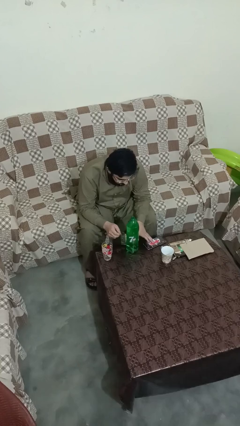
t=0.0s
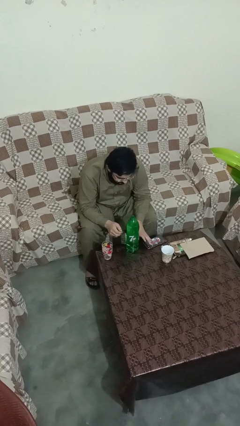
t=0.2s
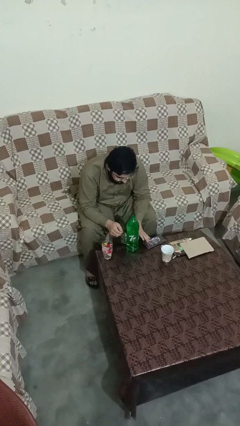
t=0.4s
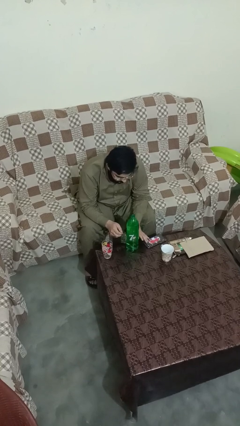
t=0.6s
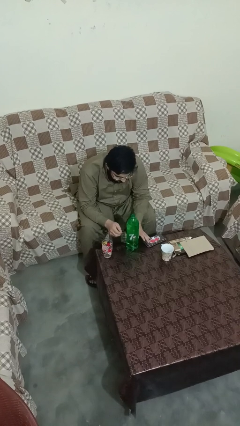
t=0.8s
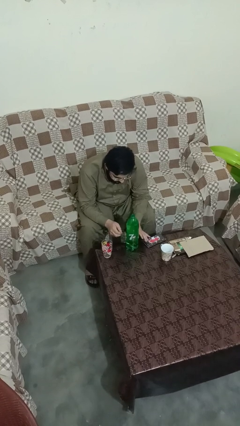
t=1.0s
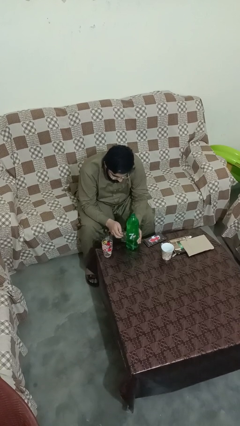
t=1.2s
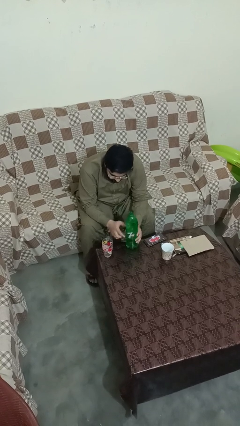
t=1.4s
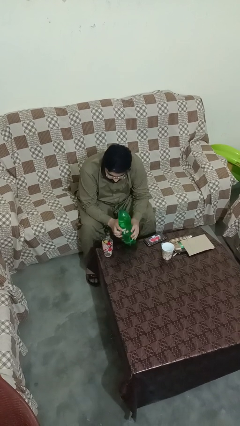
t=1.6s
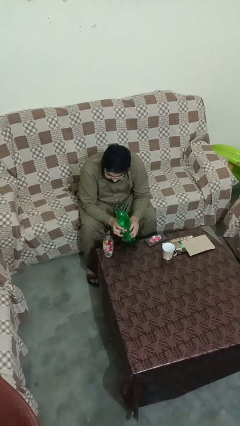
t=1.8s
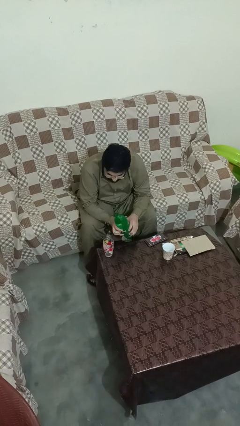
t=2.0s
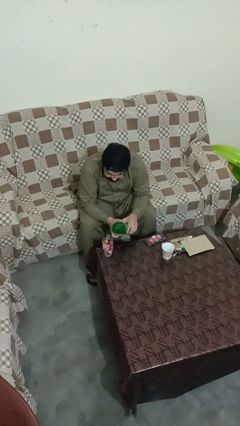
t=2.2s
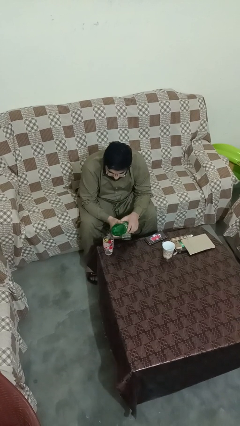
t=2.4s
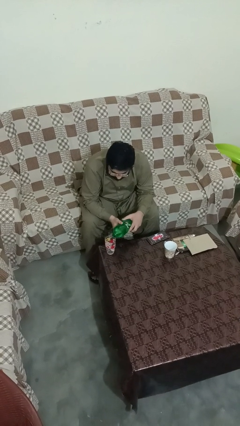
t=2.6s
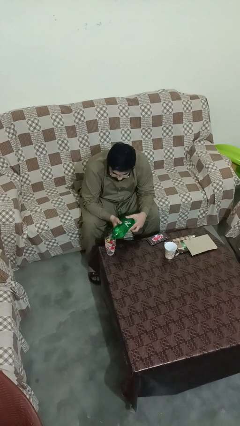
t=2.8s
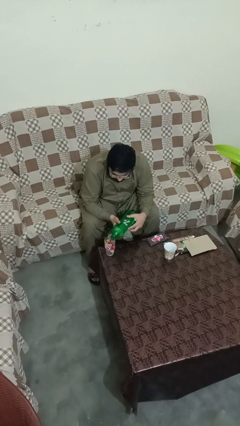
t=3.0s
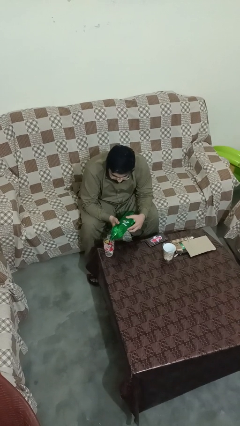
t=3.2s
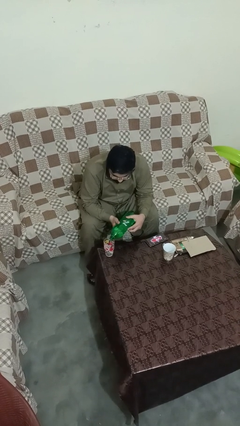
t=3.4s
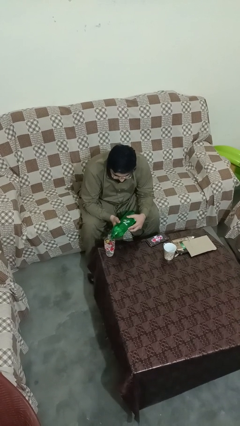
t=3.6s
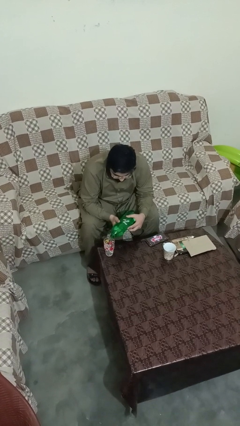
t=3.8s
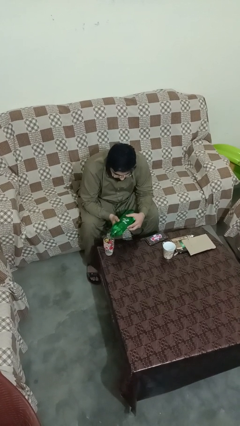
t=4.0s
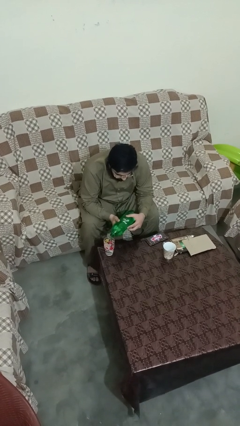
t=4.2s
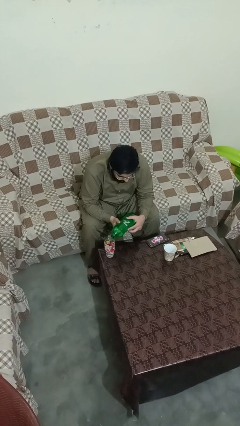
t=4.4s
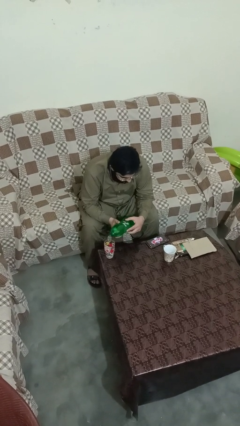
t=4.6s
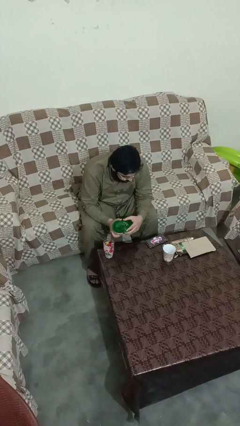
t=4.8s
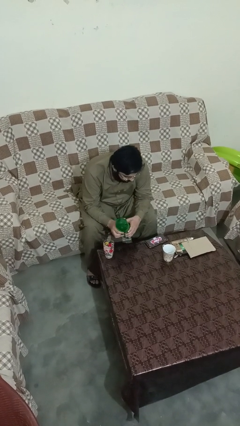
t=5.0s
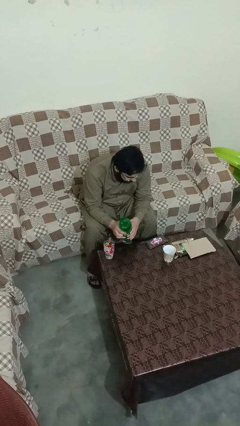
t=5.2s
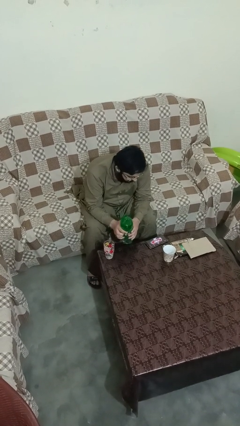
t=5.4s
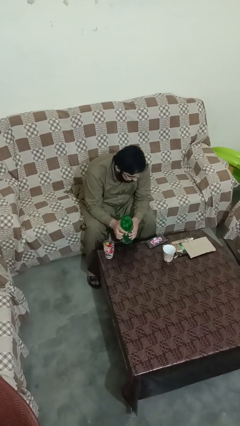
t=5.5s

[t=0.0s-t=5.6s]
person pours liquid into cup

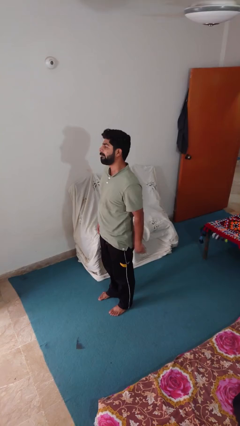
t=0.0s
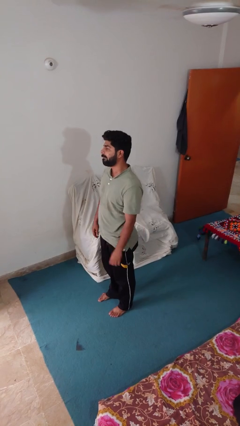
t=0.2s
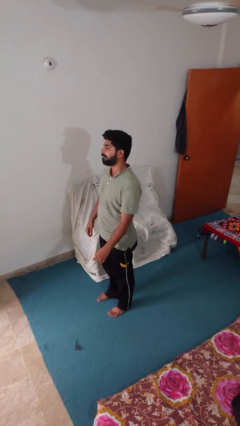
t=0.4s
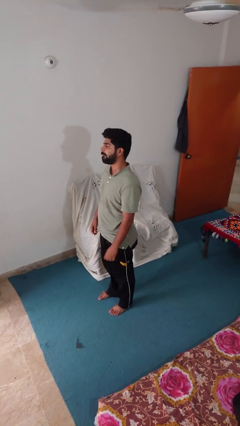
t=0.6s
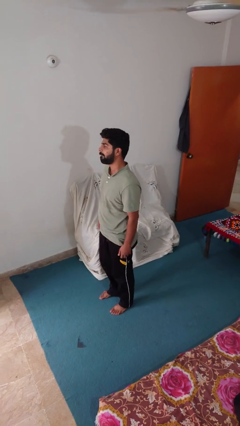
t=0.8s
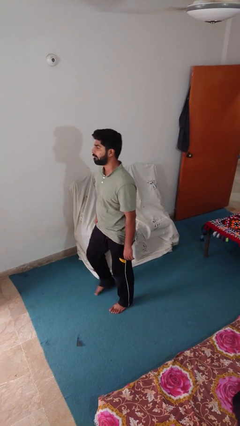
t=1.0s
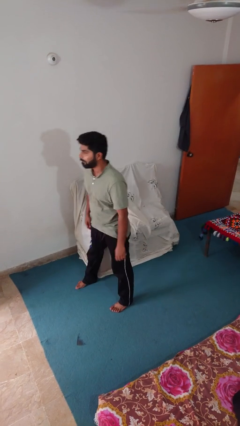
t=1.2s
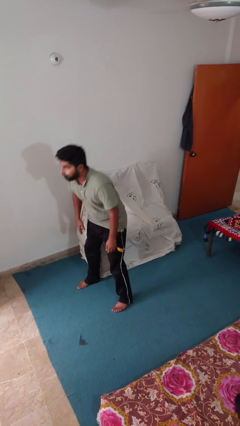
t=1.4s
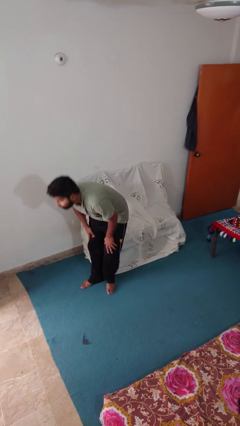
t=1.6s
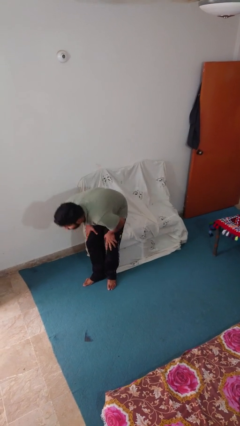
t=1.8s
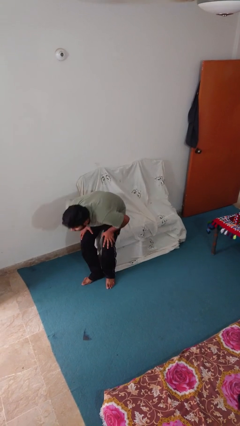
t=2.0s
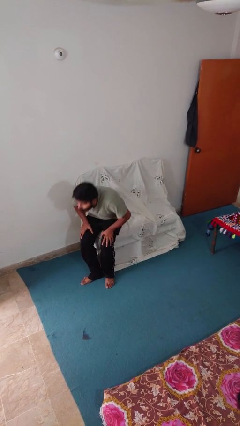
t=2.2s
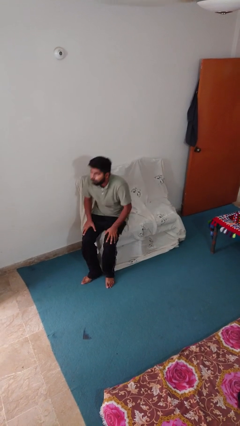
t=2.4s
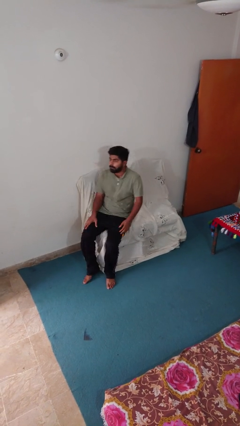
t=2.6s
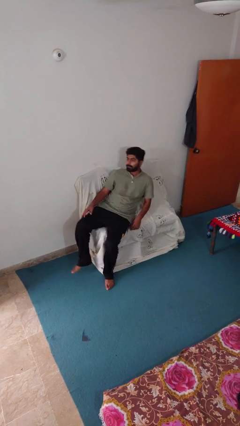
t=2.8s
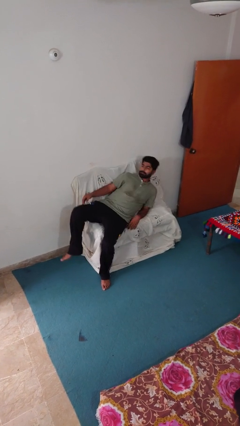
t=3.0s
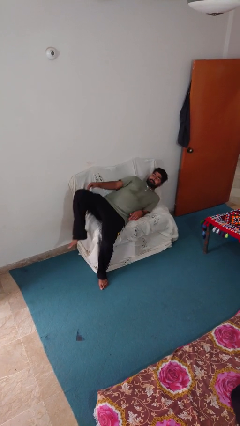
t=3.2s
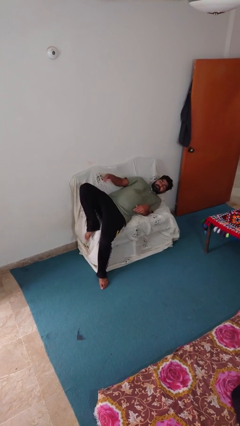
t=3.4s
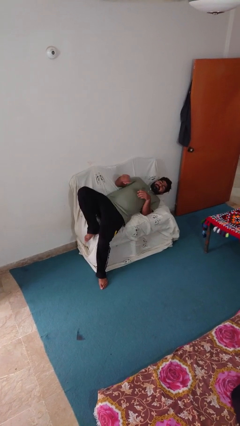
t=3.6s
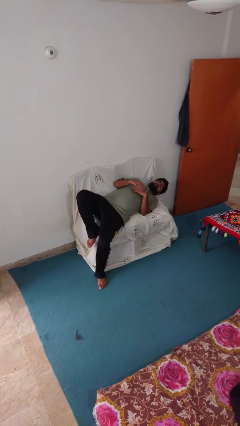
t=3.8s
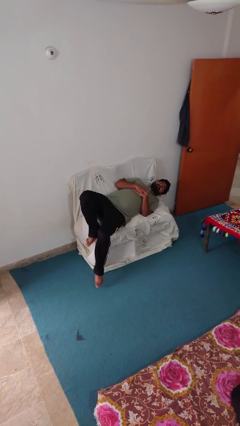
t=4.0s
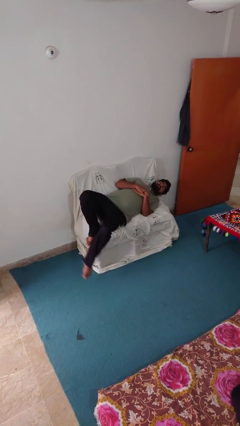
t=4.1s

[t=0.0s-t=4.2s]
person lies down on couch

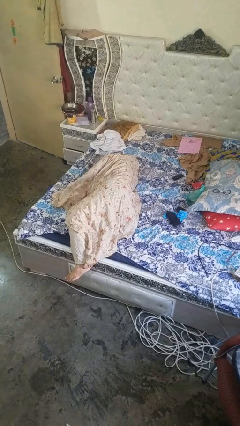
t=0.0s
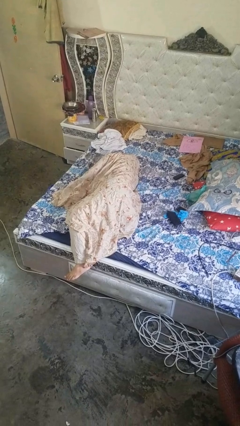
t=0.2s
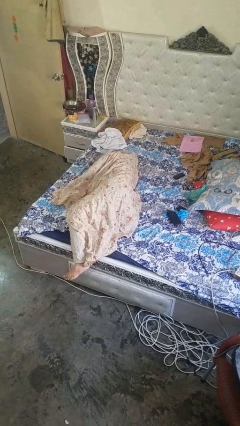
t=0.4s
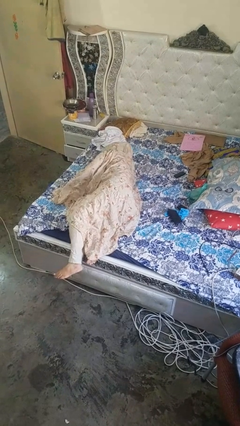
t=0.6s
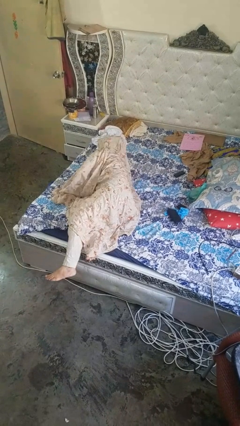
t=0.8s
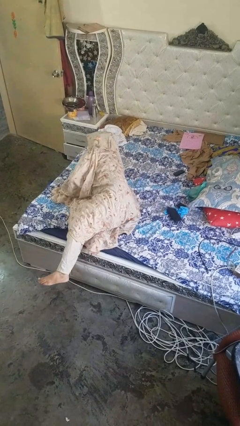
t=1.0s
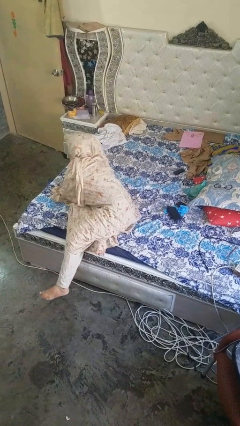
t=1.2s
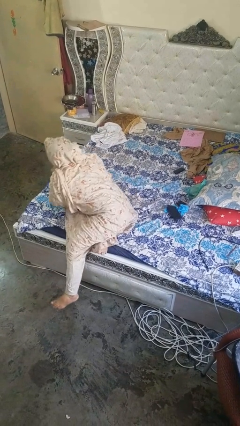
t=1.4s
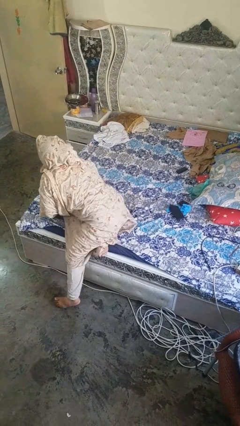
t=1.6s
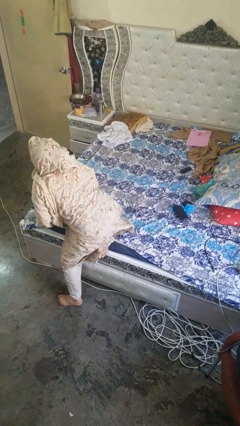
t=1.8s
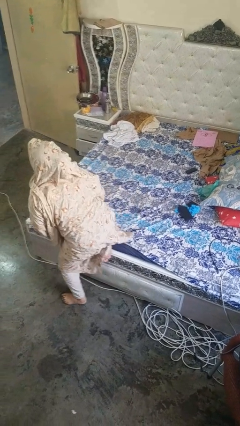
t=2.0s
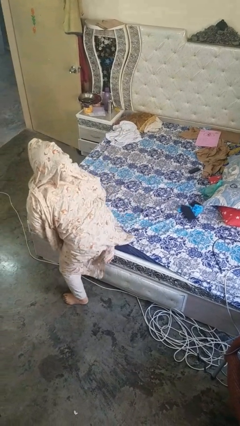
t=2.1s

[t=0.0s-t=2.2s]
person stands up

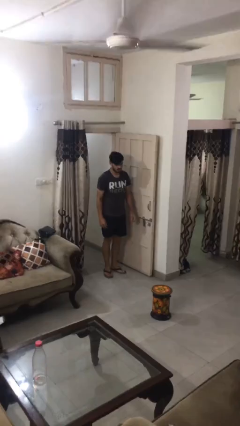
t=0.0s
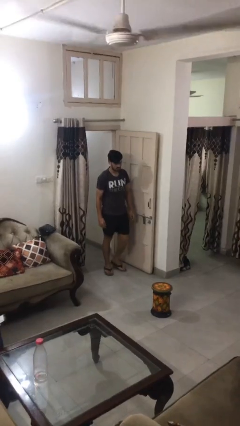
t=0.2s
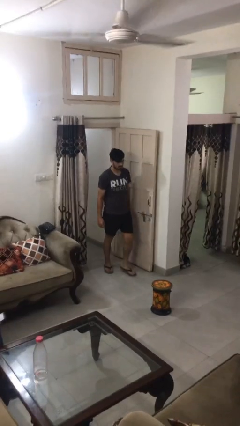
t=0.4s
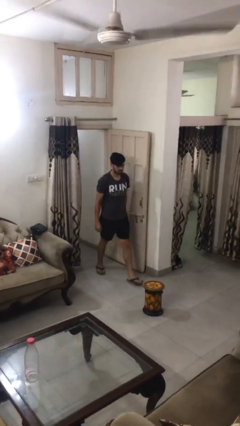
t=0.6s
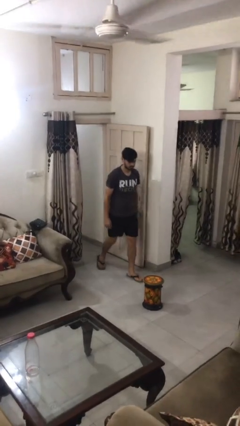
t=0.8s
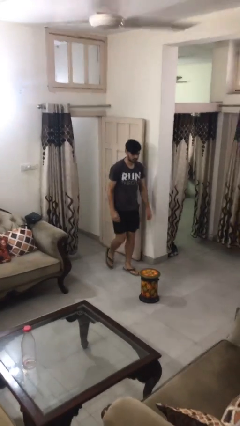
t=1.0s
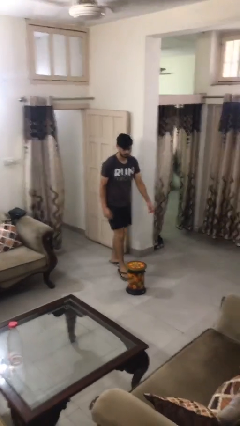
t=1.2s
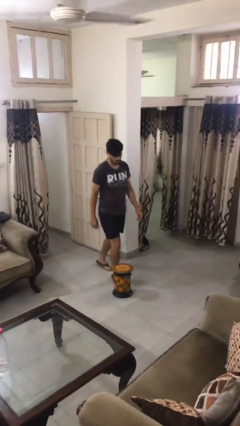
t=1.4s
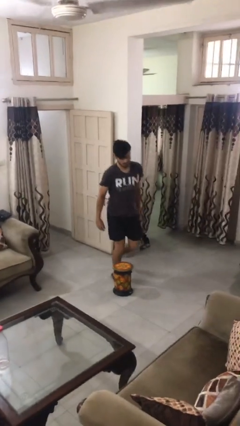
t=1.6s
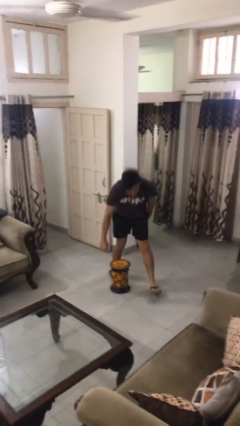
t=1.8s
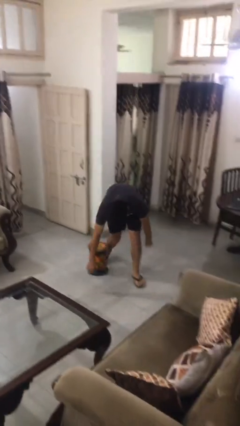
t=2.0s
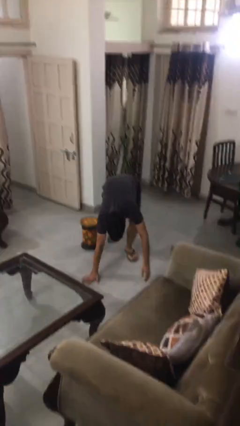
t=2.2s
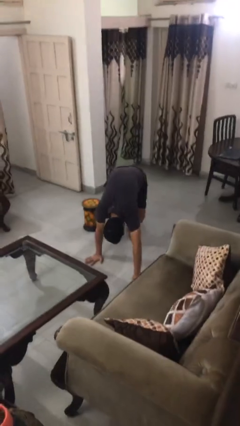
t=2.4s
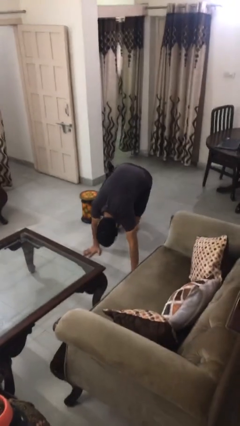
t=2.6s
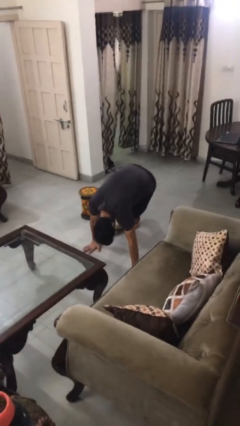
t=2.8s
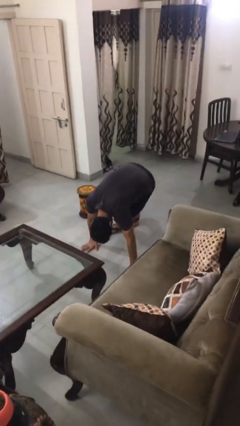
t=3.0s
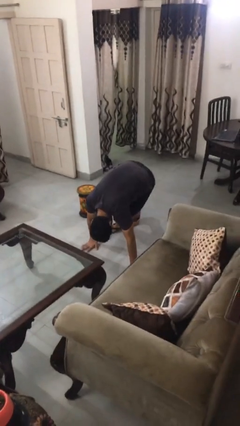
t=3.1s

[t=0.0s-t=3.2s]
person trips on object on floor

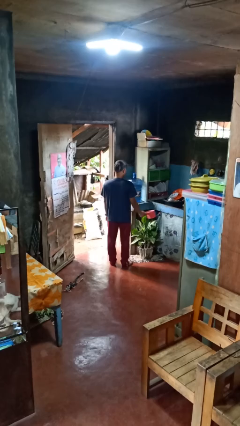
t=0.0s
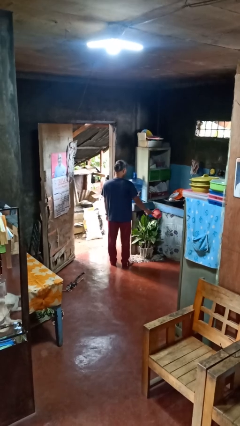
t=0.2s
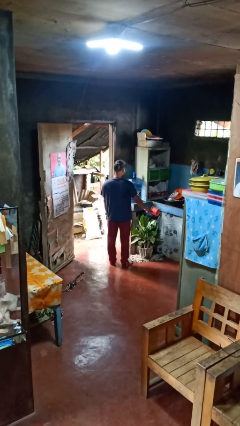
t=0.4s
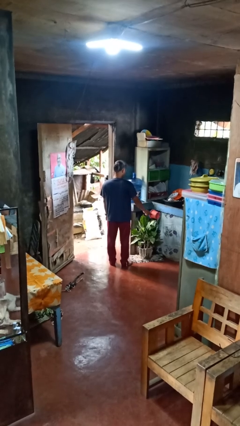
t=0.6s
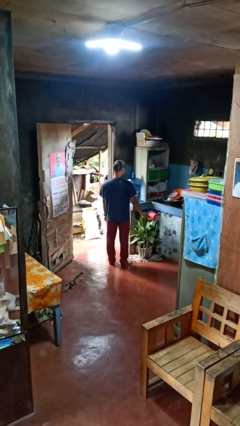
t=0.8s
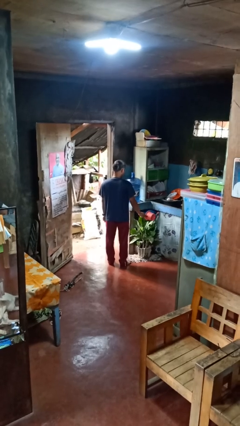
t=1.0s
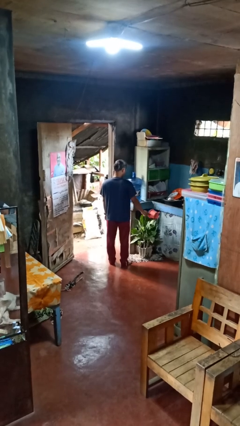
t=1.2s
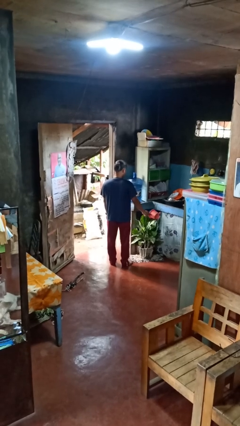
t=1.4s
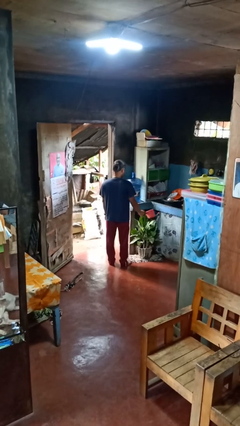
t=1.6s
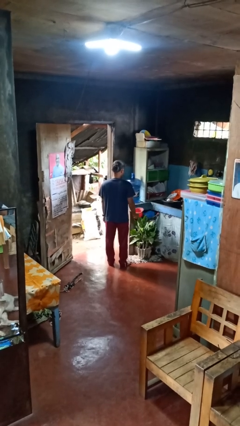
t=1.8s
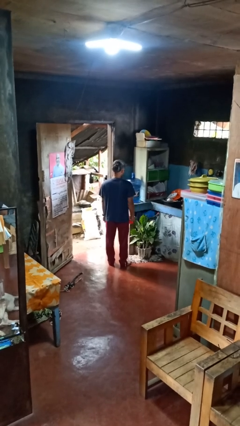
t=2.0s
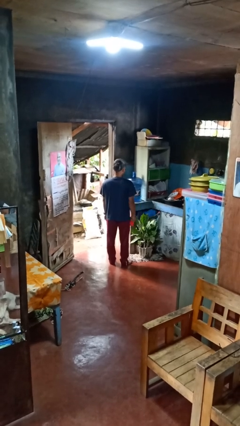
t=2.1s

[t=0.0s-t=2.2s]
person waters houseplant
